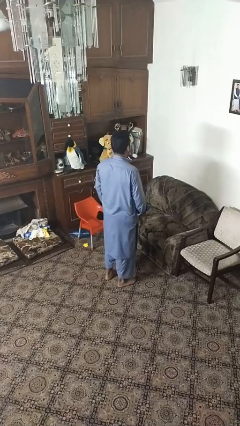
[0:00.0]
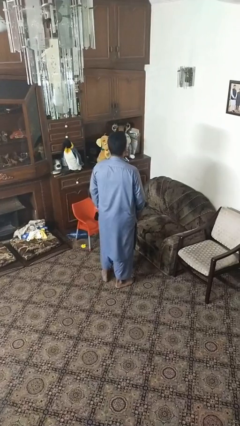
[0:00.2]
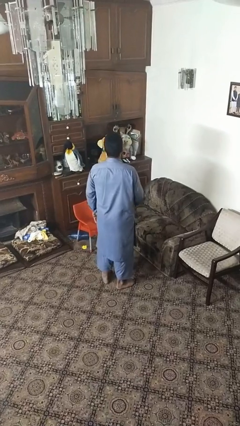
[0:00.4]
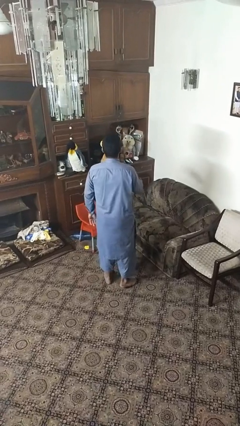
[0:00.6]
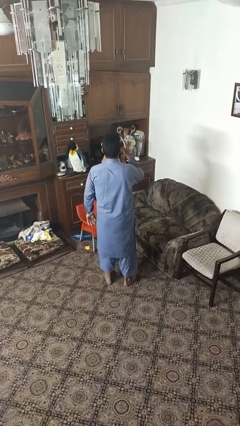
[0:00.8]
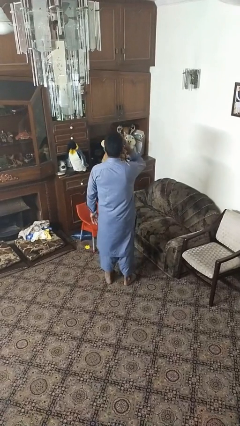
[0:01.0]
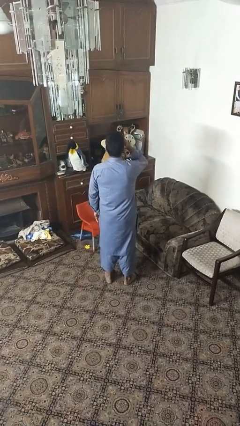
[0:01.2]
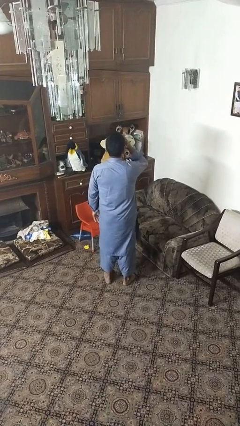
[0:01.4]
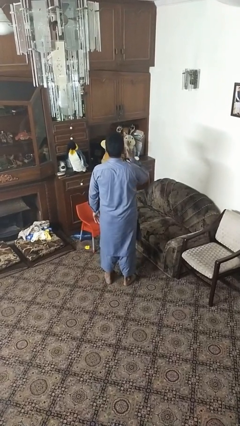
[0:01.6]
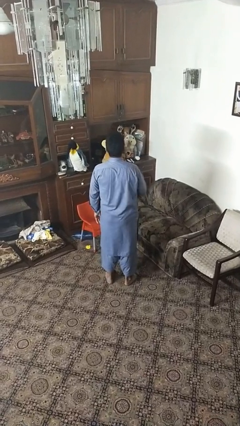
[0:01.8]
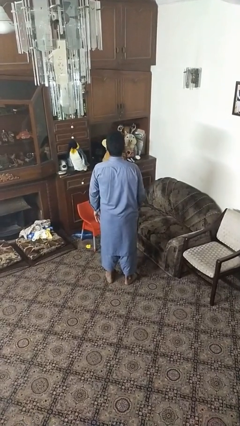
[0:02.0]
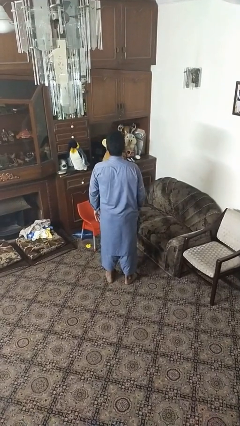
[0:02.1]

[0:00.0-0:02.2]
person salutes

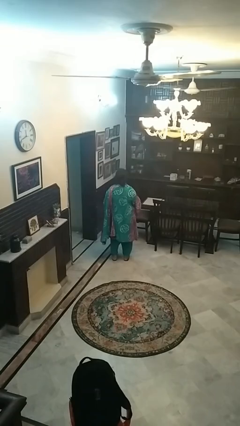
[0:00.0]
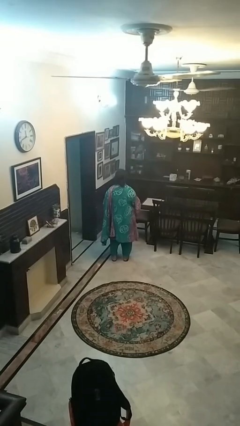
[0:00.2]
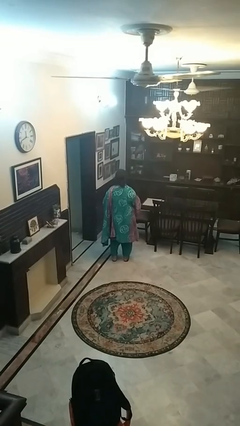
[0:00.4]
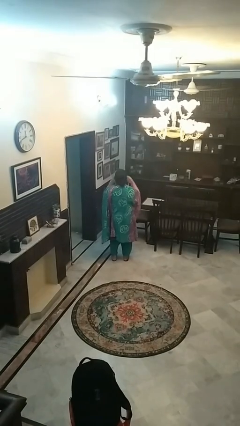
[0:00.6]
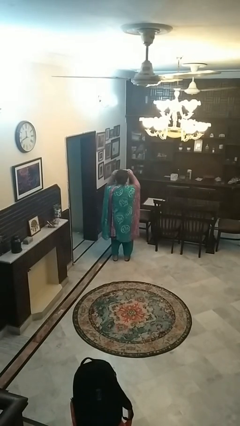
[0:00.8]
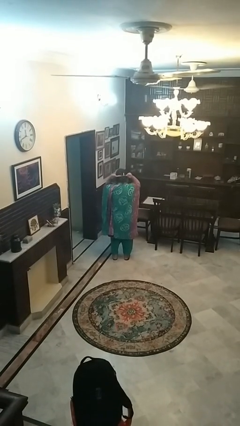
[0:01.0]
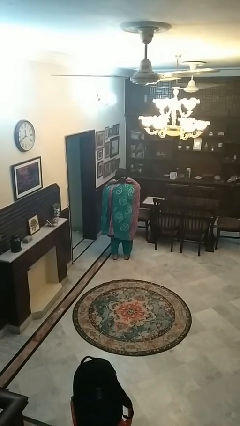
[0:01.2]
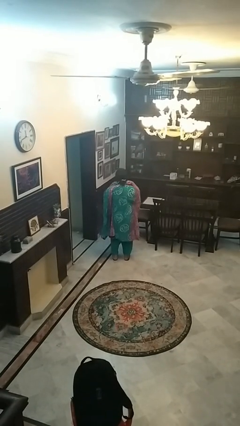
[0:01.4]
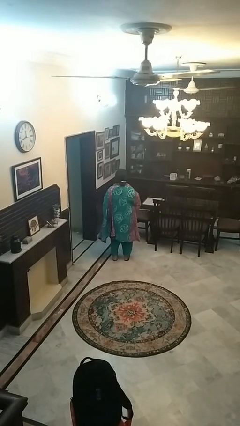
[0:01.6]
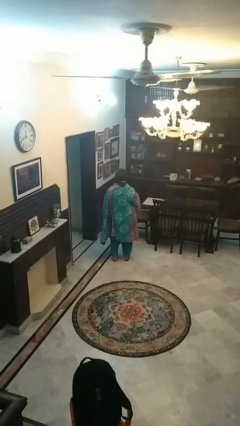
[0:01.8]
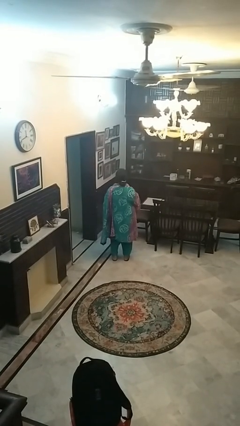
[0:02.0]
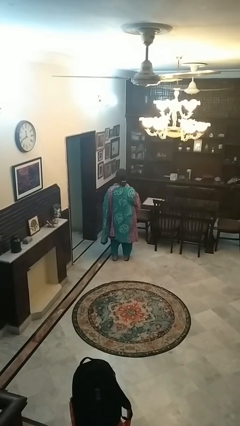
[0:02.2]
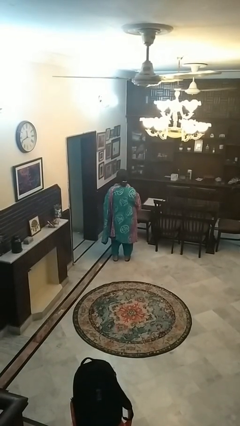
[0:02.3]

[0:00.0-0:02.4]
person puts on apron

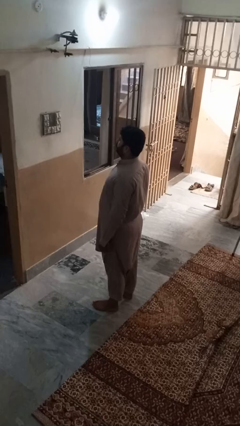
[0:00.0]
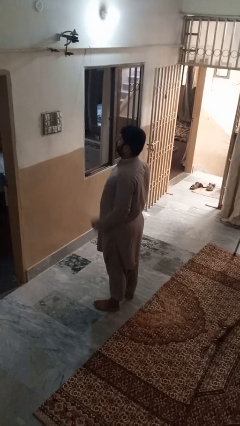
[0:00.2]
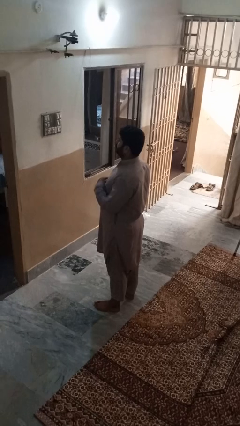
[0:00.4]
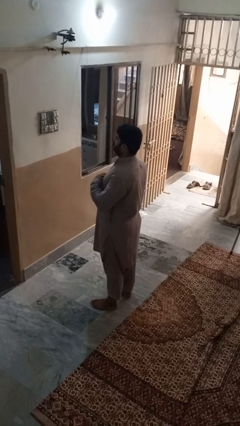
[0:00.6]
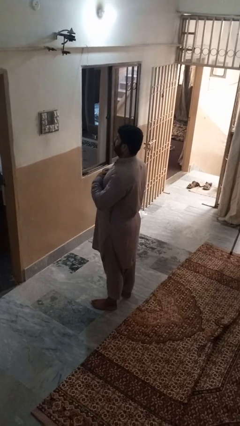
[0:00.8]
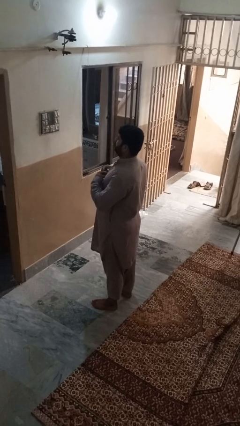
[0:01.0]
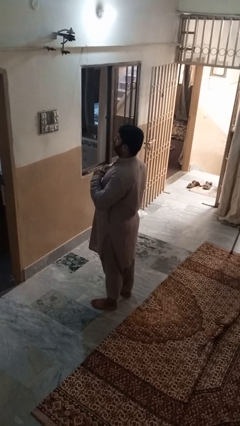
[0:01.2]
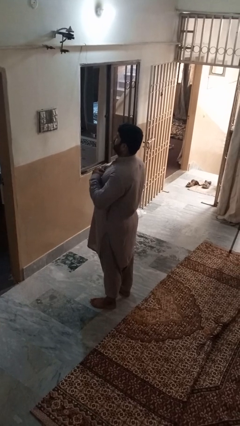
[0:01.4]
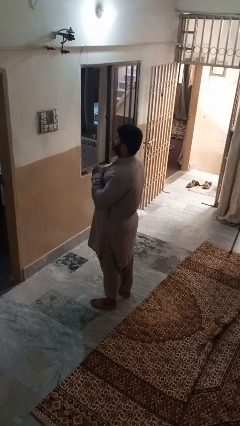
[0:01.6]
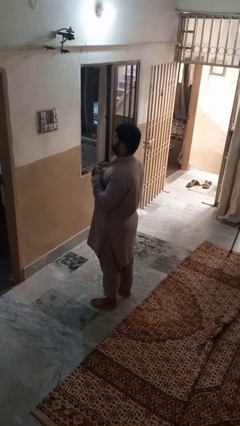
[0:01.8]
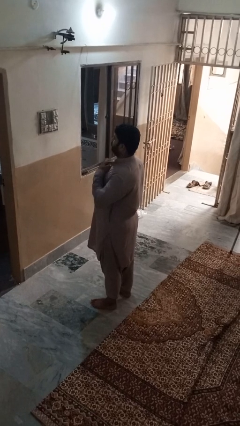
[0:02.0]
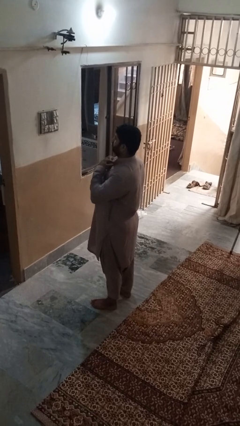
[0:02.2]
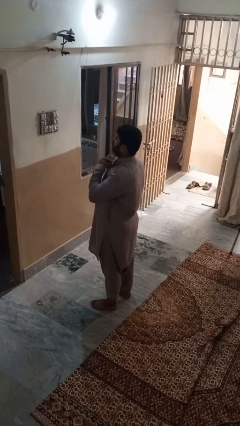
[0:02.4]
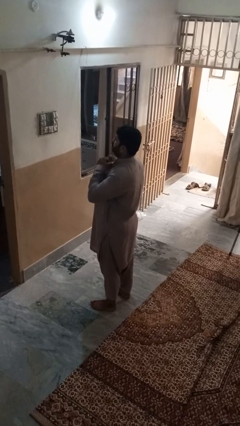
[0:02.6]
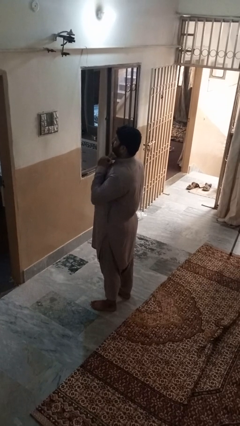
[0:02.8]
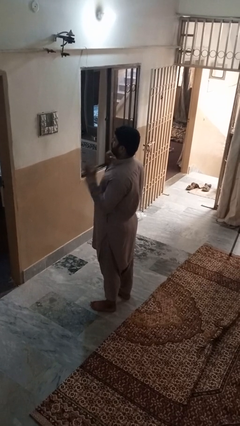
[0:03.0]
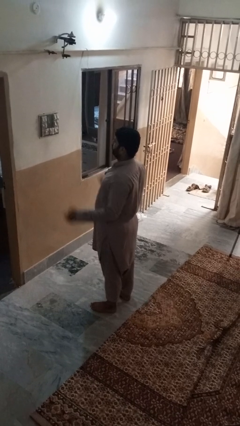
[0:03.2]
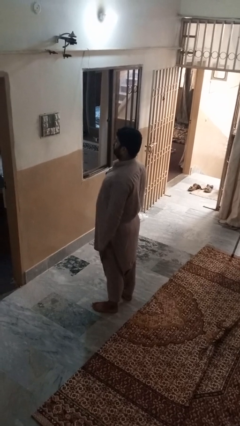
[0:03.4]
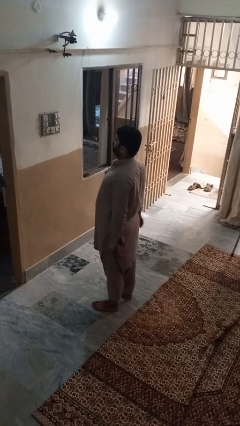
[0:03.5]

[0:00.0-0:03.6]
person unbuttons shirt

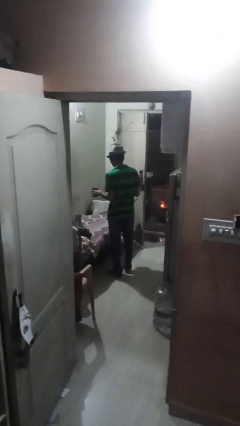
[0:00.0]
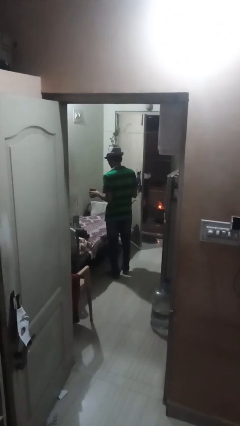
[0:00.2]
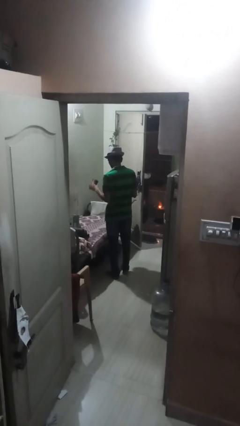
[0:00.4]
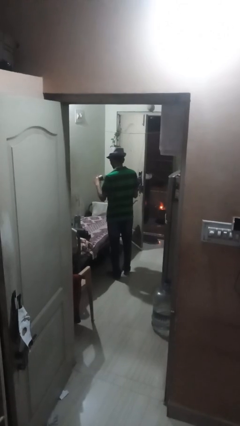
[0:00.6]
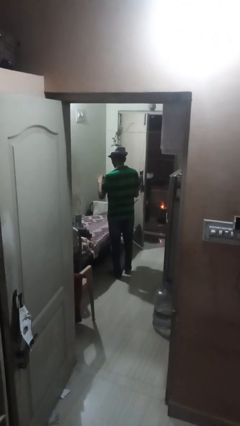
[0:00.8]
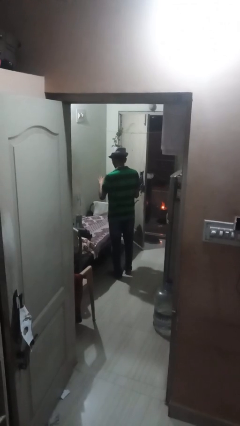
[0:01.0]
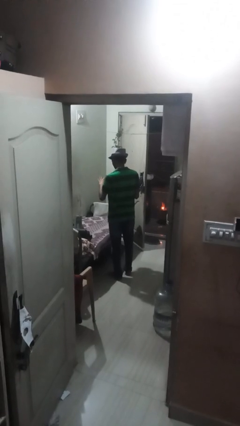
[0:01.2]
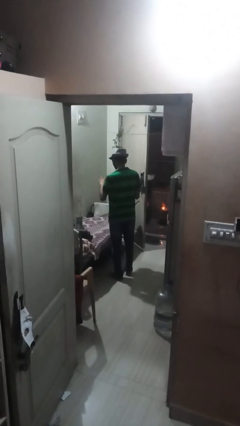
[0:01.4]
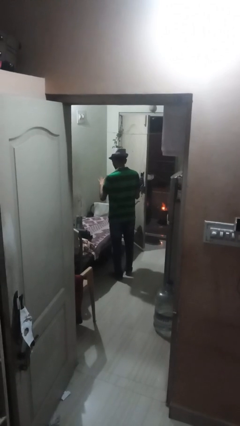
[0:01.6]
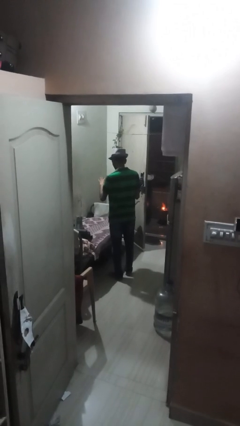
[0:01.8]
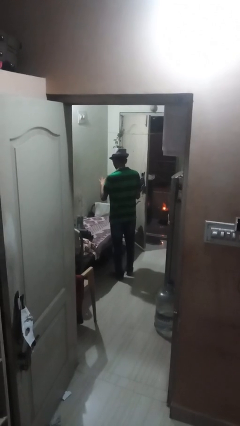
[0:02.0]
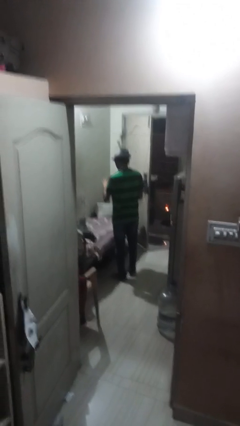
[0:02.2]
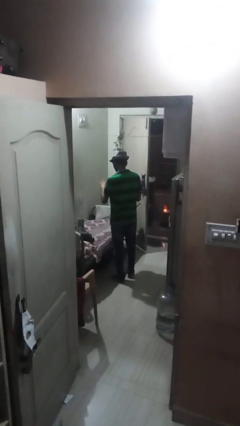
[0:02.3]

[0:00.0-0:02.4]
person pours coffee into mug

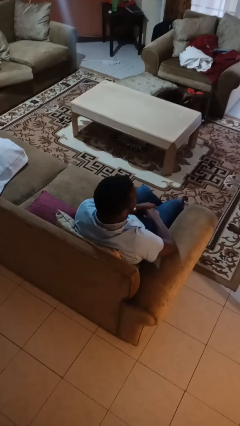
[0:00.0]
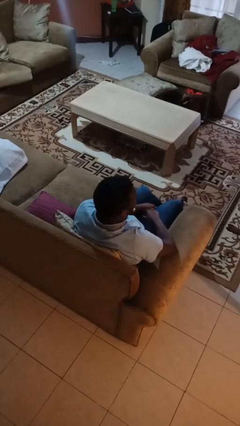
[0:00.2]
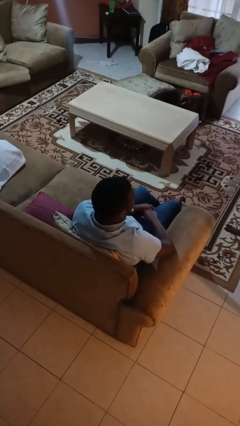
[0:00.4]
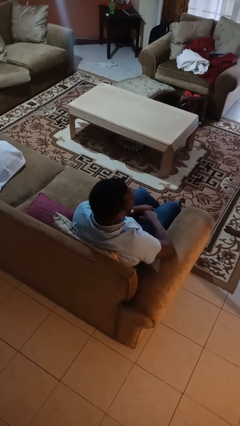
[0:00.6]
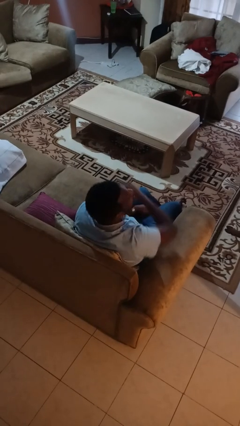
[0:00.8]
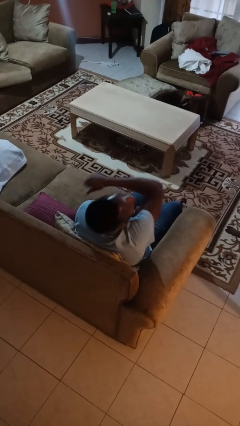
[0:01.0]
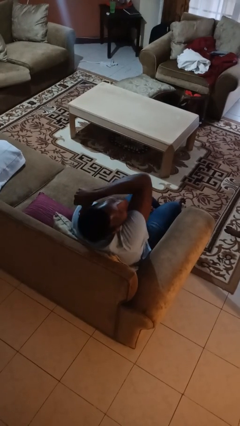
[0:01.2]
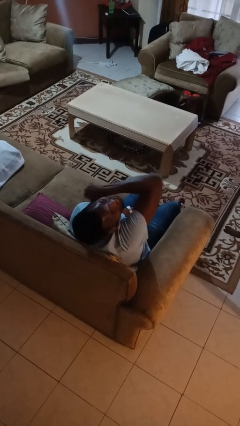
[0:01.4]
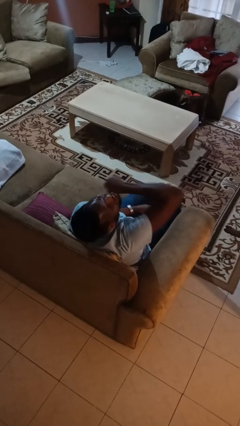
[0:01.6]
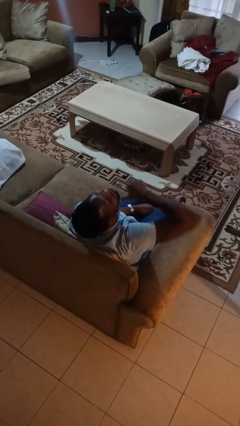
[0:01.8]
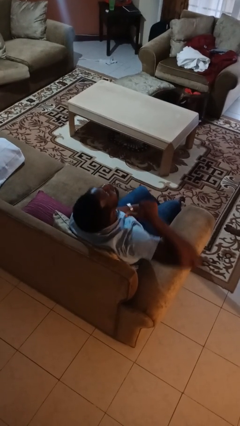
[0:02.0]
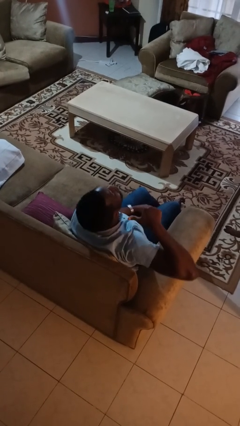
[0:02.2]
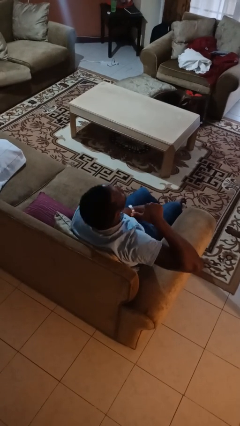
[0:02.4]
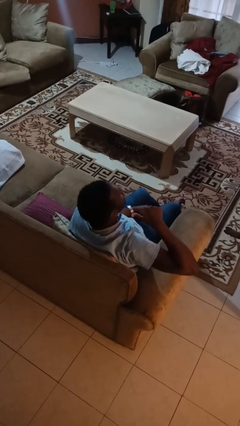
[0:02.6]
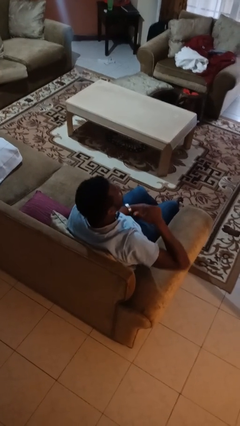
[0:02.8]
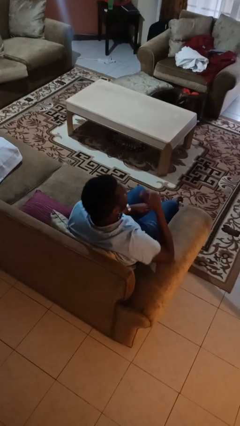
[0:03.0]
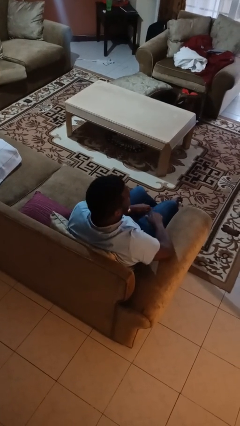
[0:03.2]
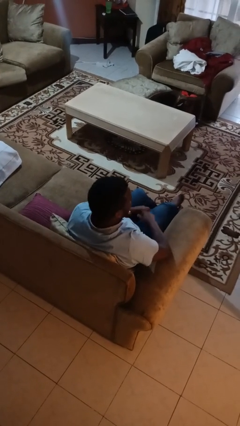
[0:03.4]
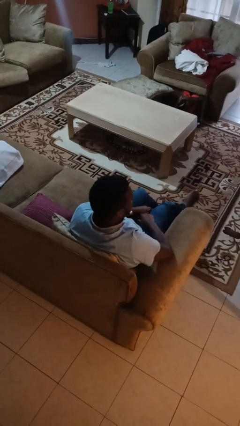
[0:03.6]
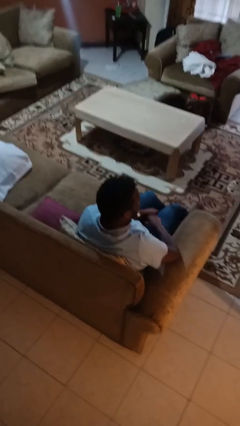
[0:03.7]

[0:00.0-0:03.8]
person gestures cut

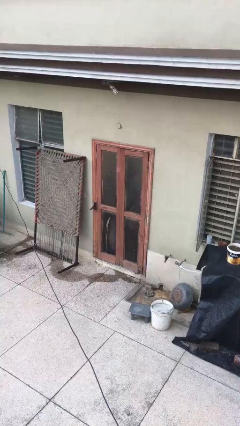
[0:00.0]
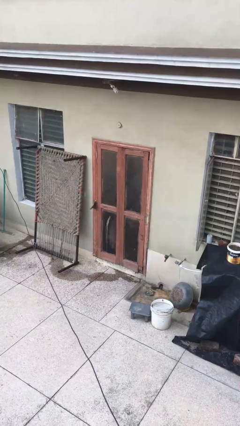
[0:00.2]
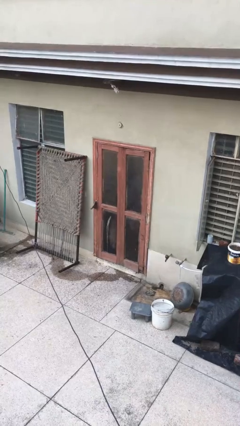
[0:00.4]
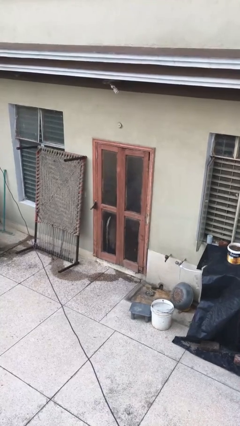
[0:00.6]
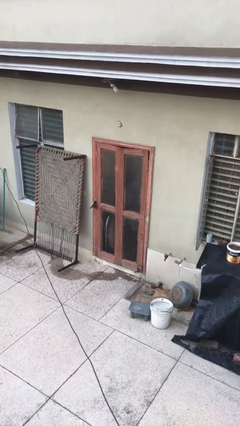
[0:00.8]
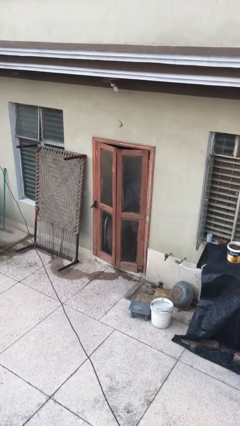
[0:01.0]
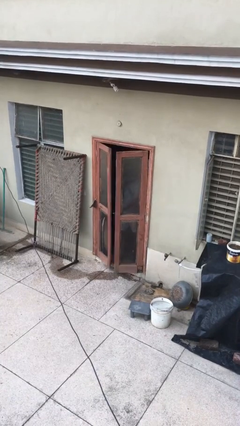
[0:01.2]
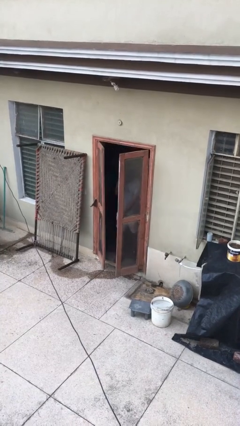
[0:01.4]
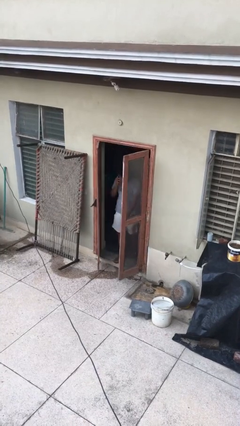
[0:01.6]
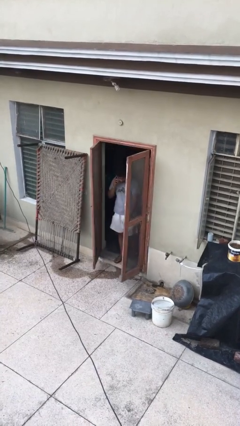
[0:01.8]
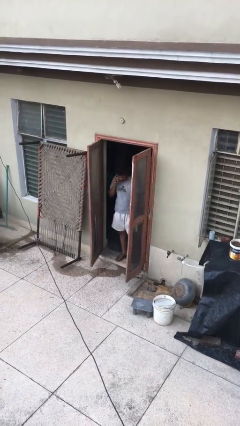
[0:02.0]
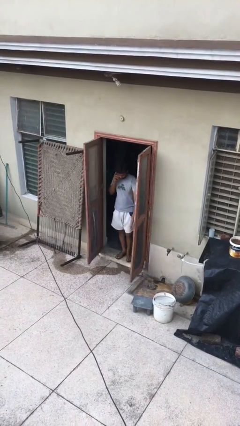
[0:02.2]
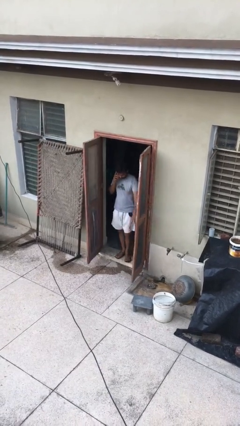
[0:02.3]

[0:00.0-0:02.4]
person opens facility door

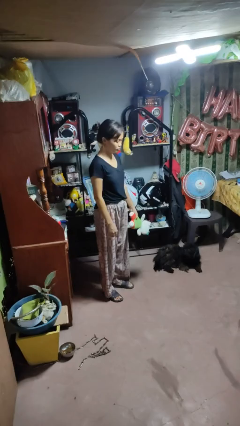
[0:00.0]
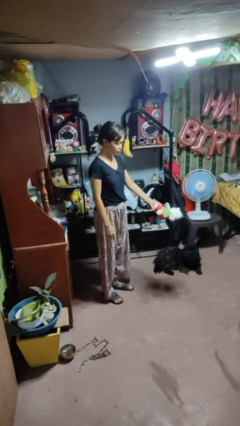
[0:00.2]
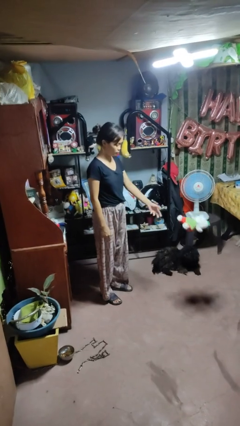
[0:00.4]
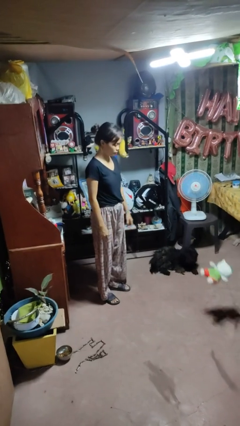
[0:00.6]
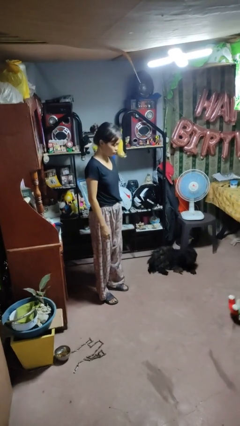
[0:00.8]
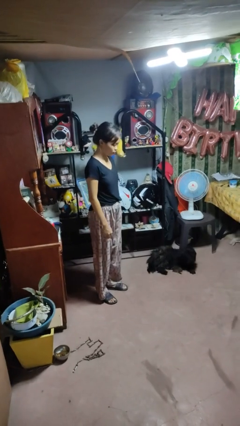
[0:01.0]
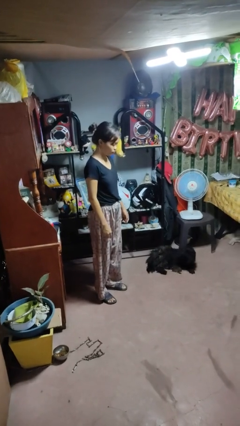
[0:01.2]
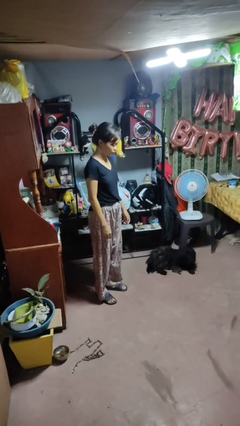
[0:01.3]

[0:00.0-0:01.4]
person throws object to ground
